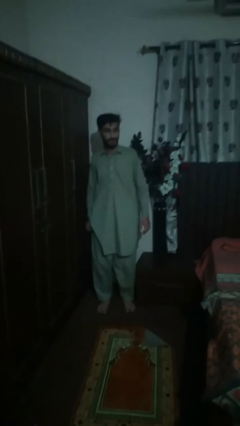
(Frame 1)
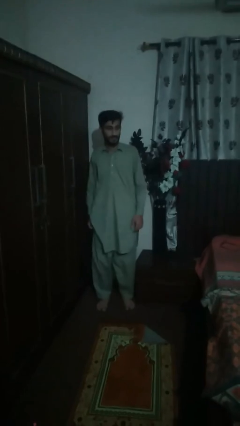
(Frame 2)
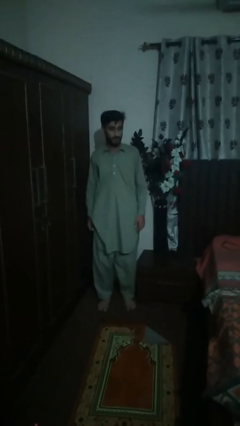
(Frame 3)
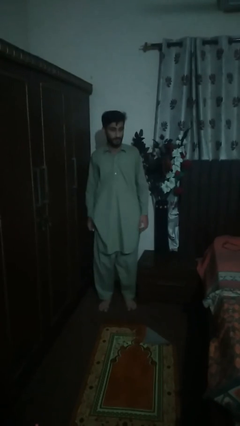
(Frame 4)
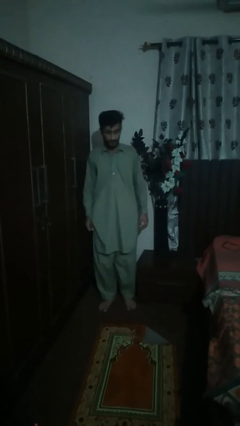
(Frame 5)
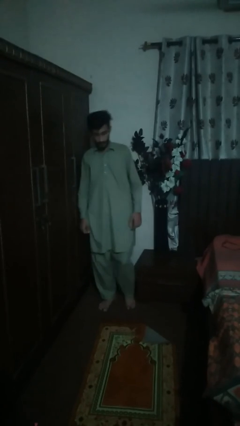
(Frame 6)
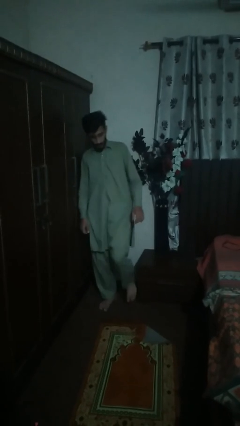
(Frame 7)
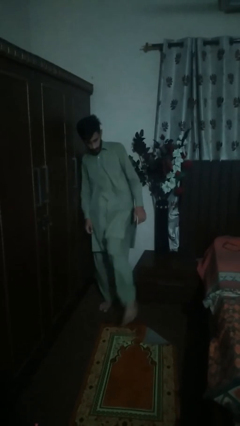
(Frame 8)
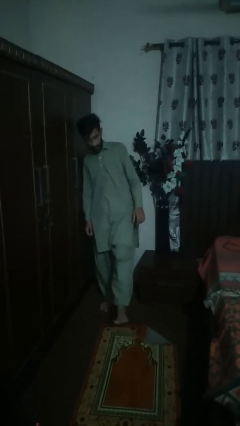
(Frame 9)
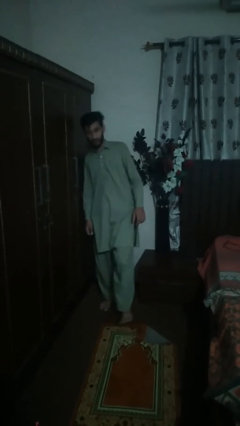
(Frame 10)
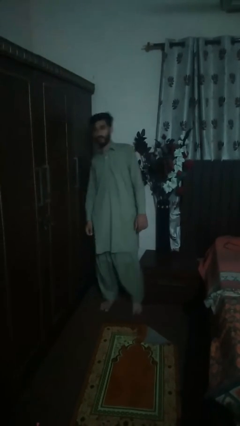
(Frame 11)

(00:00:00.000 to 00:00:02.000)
person karate kicks

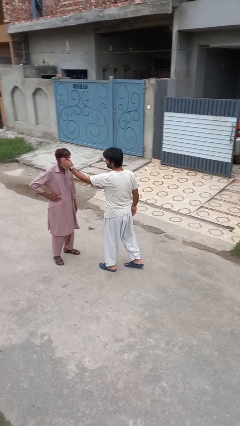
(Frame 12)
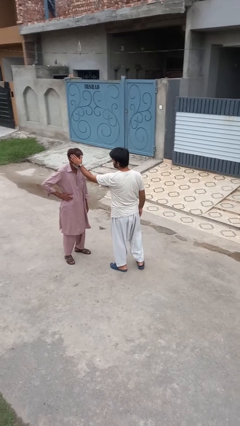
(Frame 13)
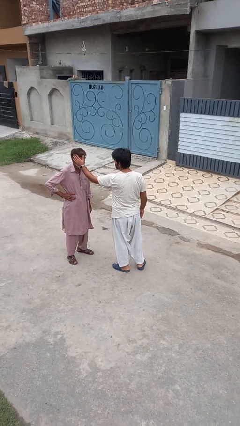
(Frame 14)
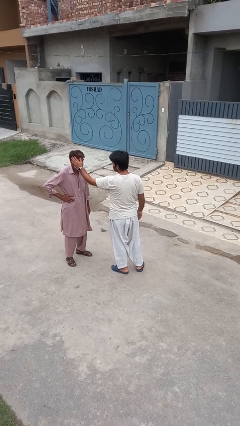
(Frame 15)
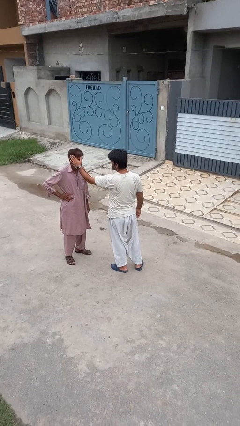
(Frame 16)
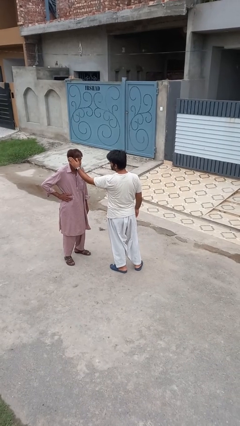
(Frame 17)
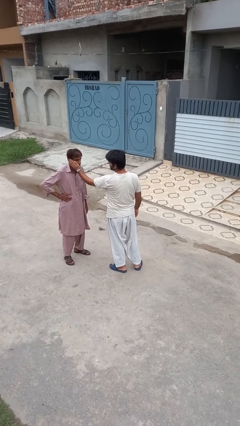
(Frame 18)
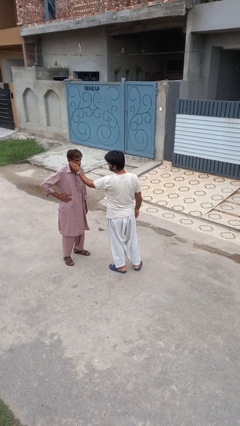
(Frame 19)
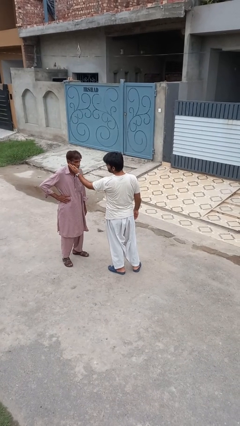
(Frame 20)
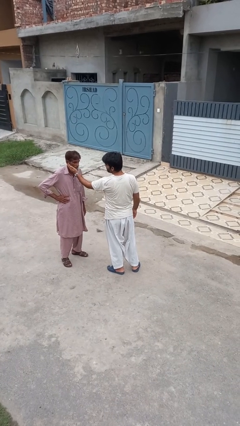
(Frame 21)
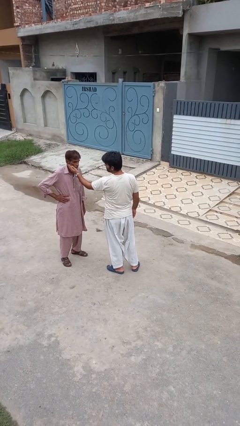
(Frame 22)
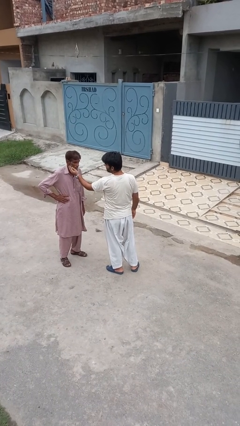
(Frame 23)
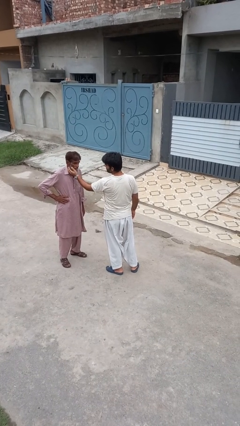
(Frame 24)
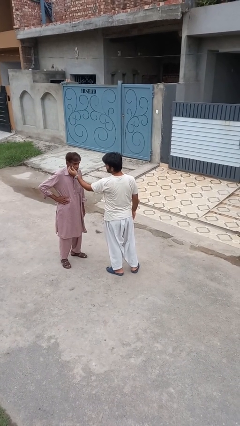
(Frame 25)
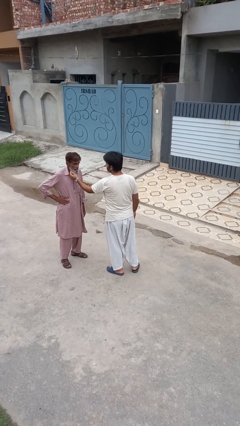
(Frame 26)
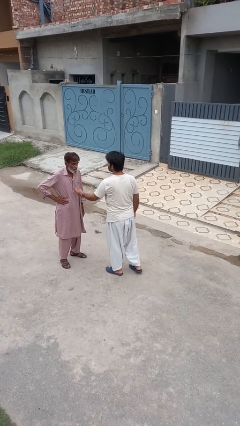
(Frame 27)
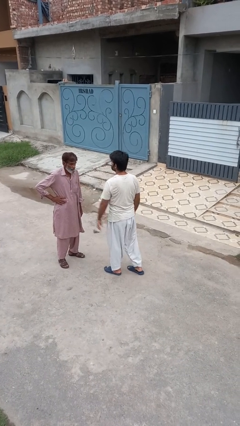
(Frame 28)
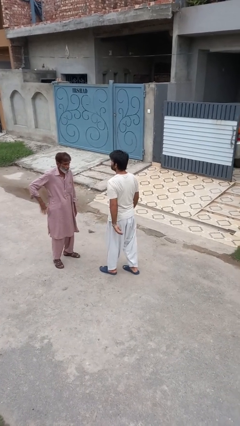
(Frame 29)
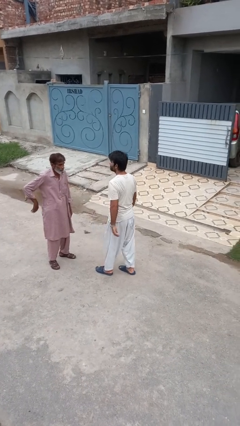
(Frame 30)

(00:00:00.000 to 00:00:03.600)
person touches face of person

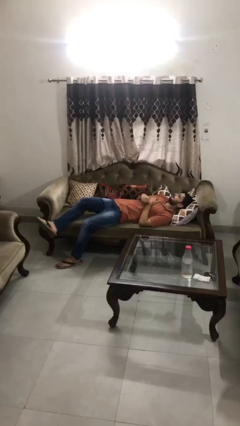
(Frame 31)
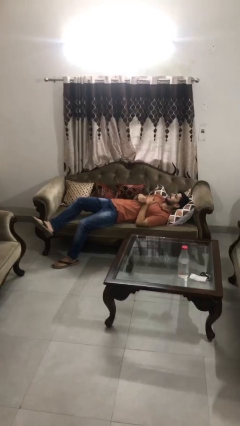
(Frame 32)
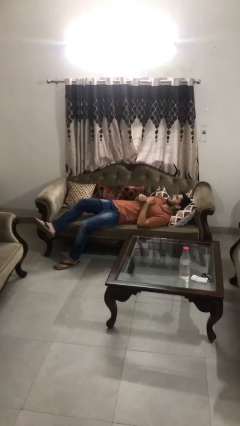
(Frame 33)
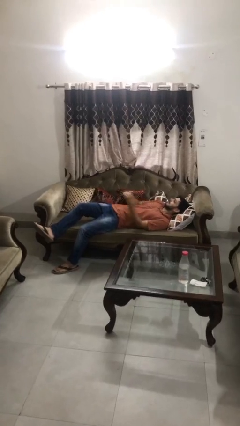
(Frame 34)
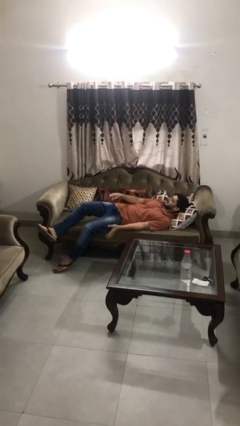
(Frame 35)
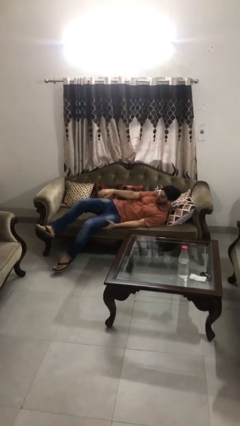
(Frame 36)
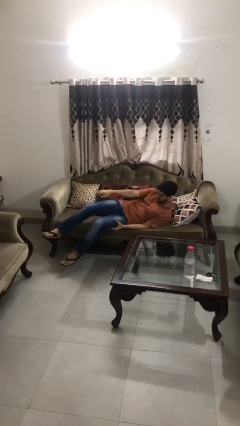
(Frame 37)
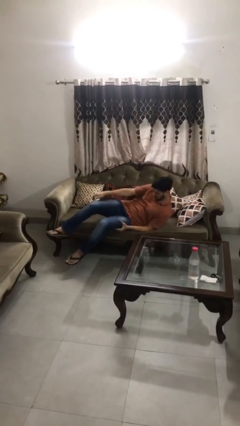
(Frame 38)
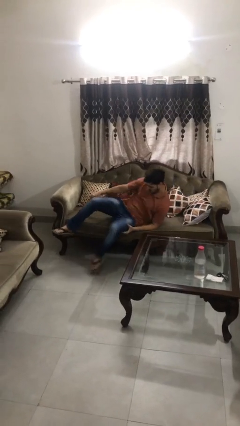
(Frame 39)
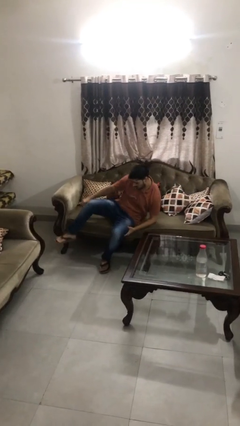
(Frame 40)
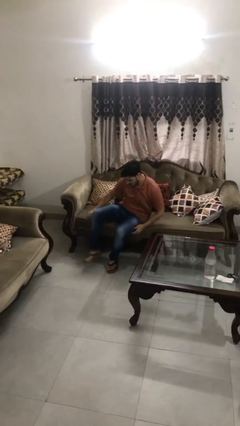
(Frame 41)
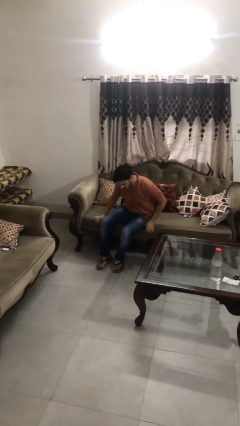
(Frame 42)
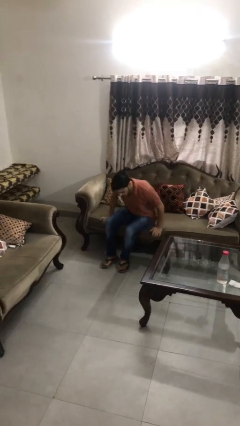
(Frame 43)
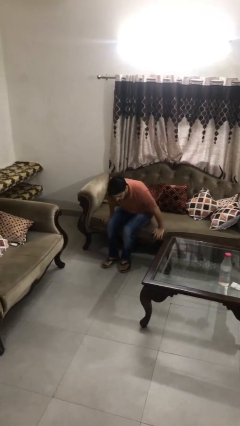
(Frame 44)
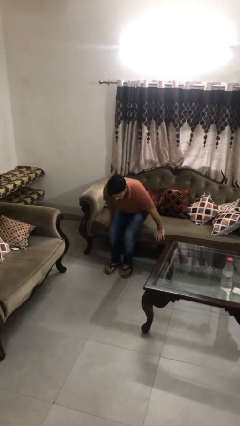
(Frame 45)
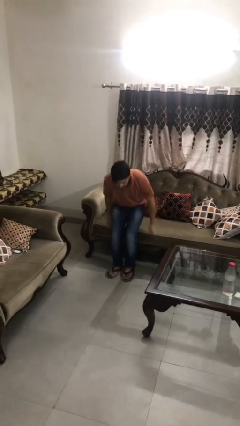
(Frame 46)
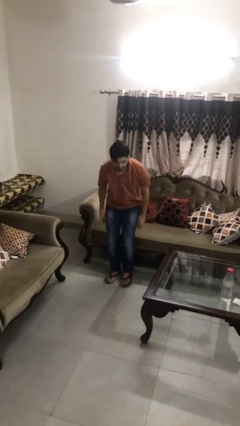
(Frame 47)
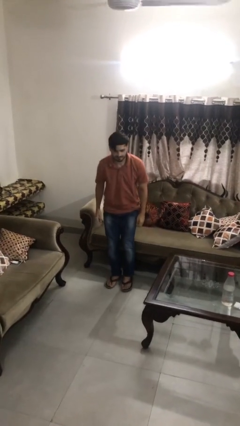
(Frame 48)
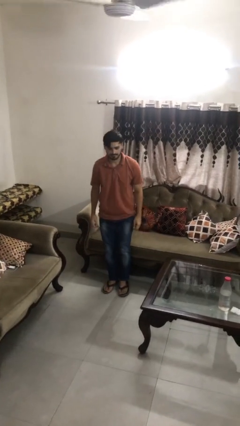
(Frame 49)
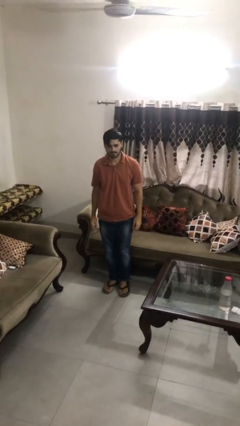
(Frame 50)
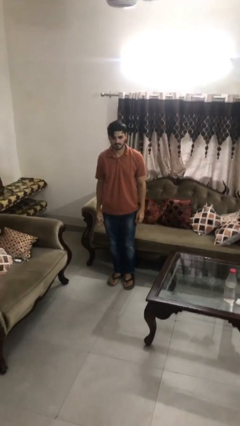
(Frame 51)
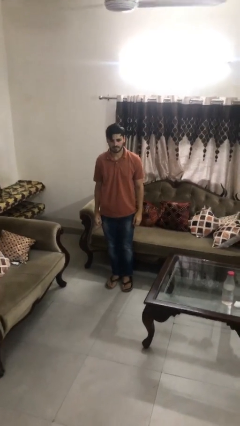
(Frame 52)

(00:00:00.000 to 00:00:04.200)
person stands up

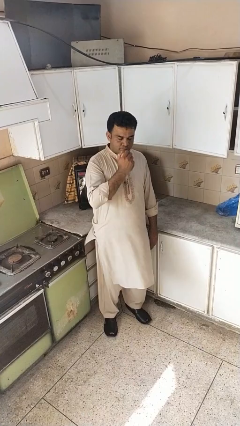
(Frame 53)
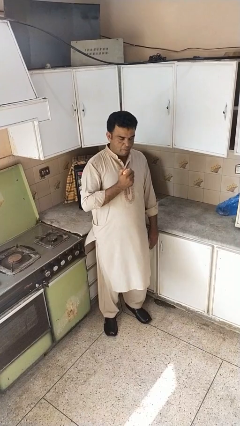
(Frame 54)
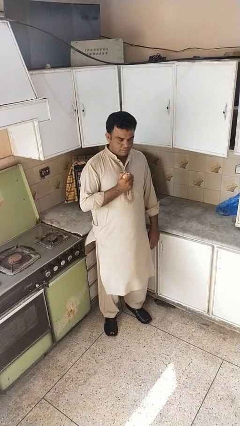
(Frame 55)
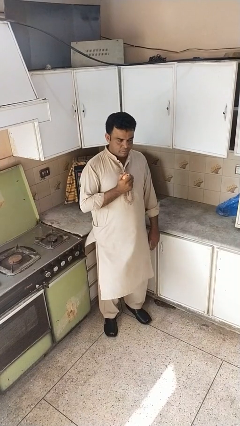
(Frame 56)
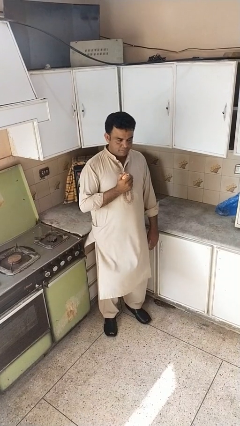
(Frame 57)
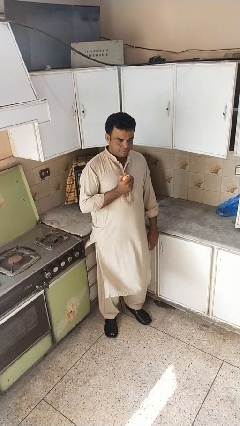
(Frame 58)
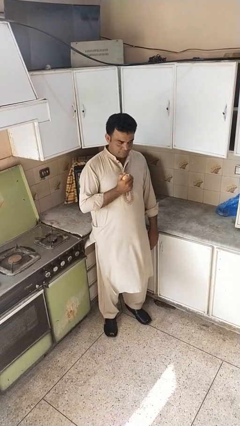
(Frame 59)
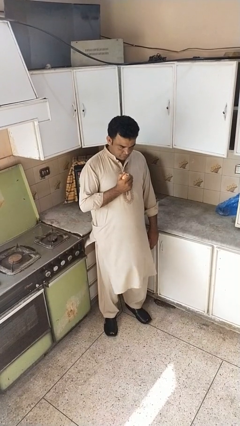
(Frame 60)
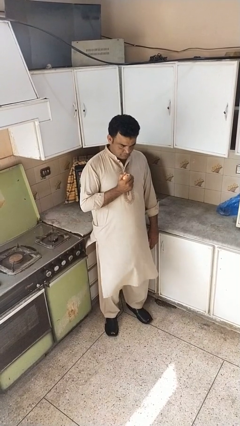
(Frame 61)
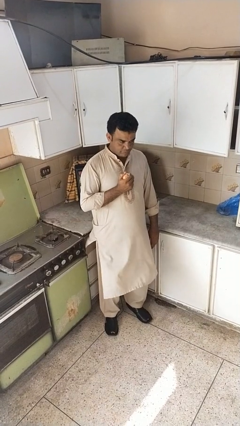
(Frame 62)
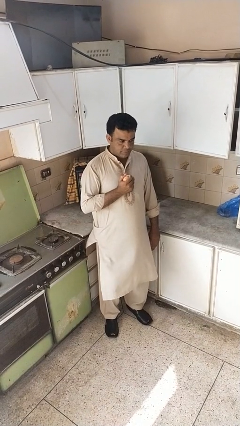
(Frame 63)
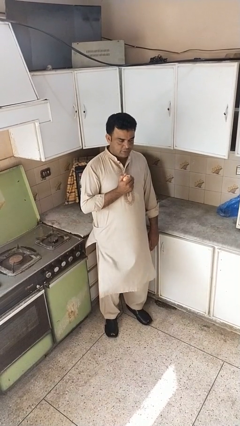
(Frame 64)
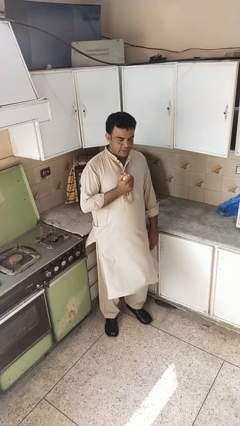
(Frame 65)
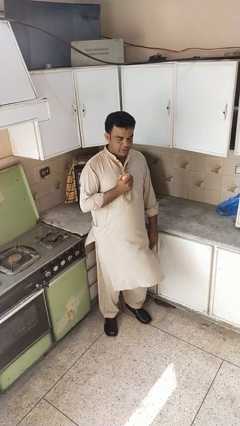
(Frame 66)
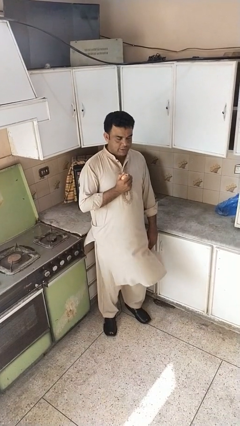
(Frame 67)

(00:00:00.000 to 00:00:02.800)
person eats apple

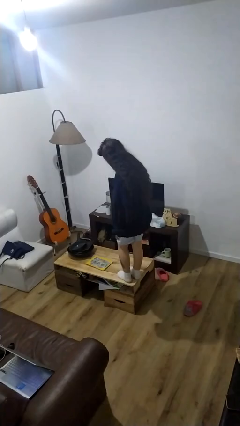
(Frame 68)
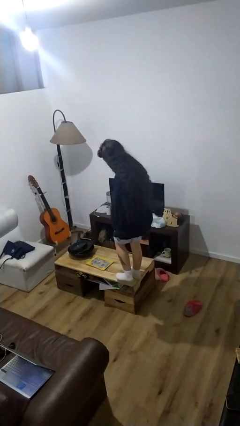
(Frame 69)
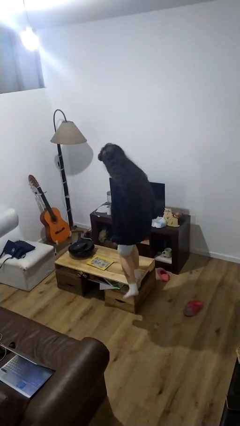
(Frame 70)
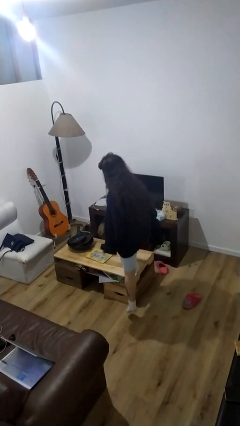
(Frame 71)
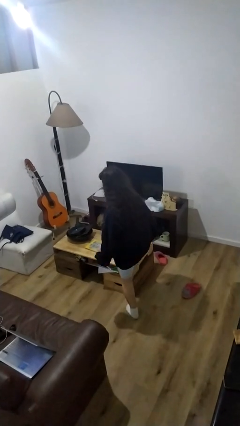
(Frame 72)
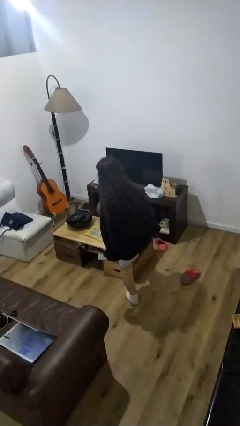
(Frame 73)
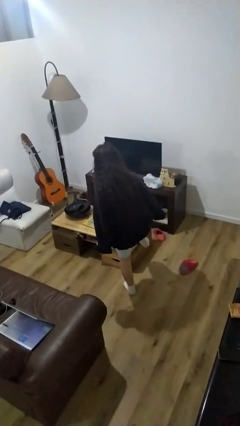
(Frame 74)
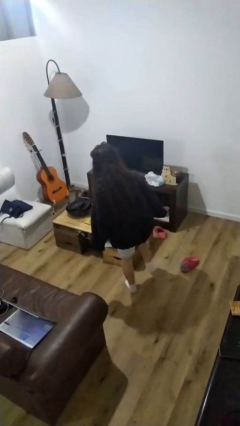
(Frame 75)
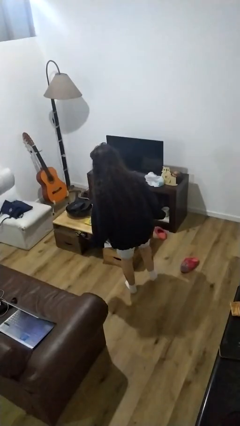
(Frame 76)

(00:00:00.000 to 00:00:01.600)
person climbs off table

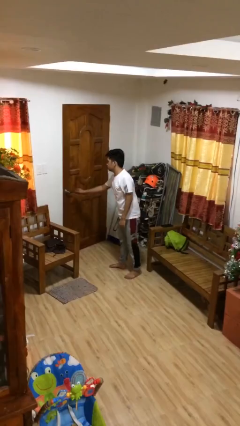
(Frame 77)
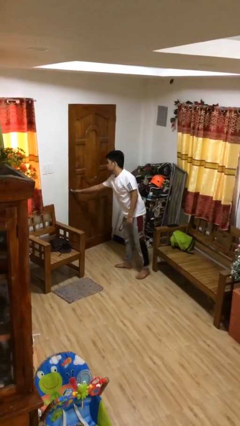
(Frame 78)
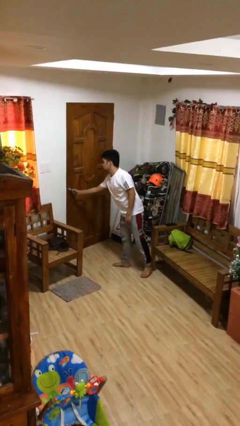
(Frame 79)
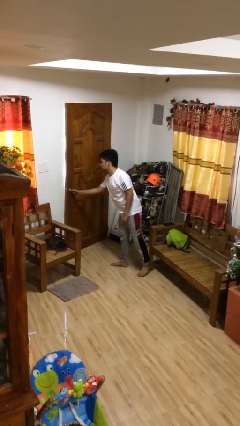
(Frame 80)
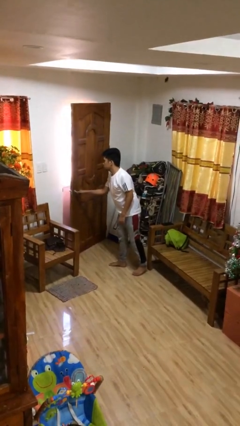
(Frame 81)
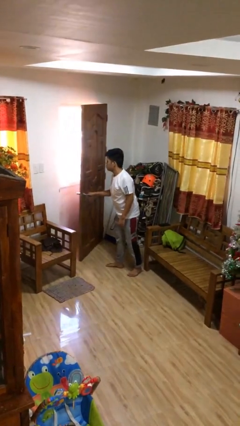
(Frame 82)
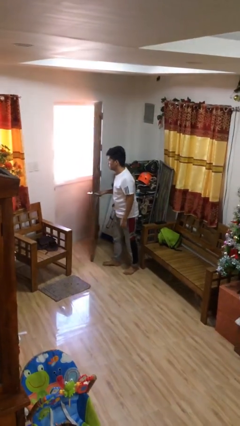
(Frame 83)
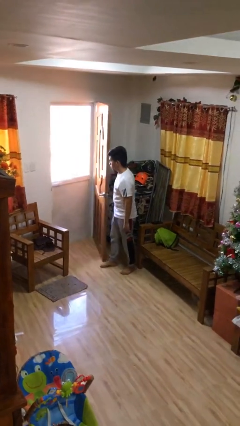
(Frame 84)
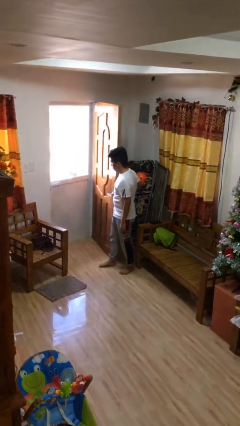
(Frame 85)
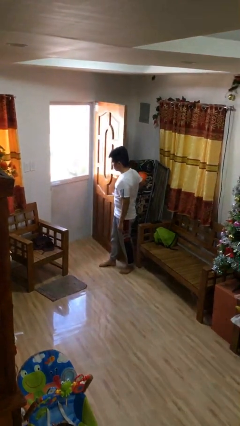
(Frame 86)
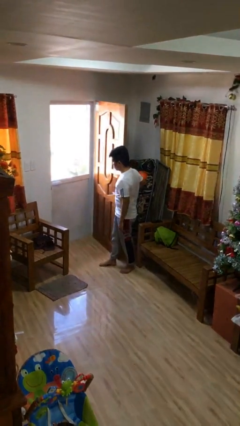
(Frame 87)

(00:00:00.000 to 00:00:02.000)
person opens facility door

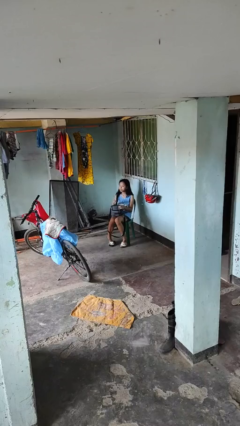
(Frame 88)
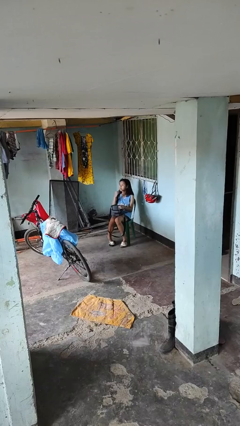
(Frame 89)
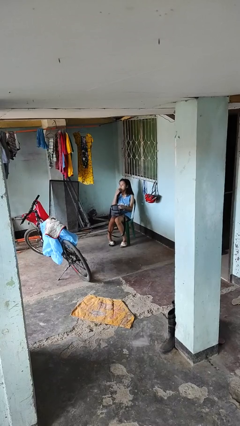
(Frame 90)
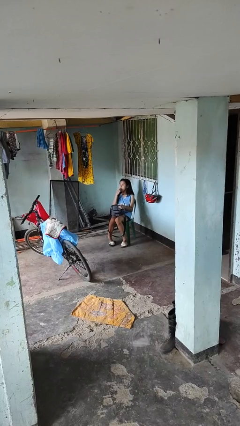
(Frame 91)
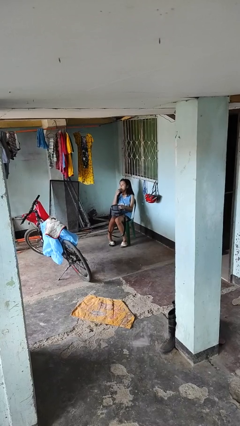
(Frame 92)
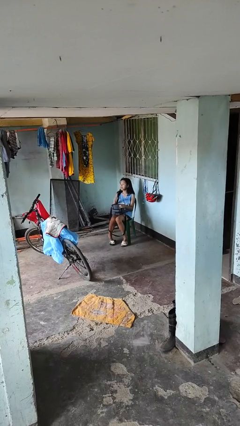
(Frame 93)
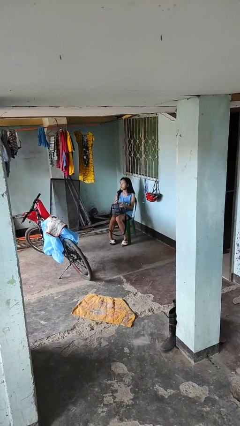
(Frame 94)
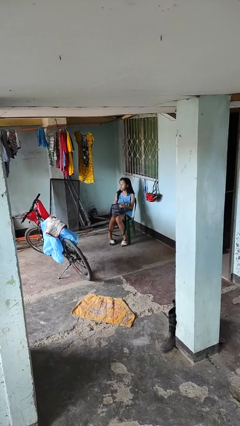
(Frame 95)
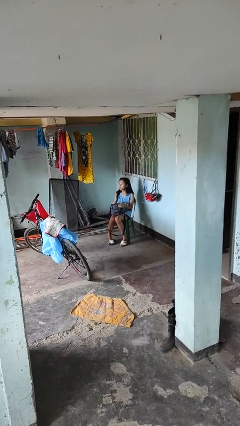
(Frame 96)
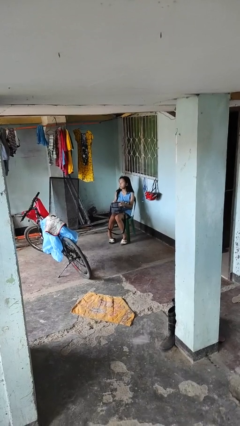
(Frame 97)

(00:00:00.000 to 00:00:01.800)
person eats snack from bag
